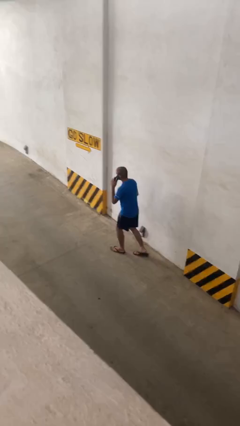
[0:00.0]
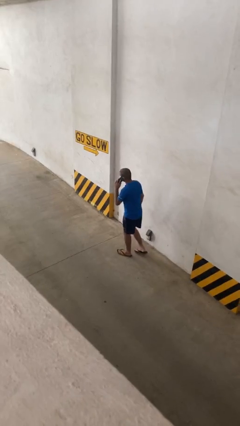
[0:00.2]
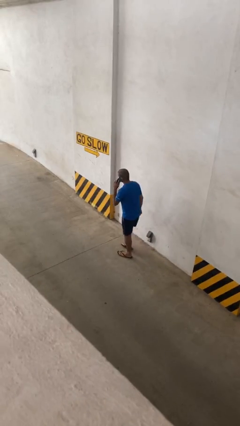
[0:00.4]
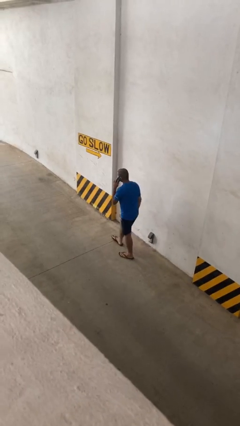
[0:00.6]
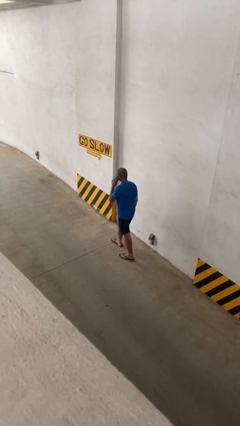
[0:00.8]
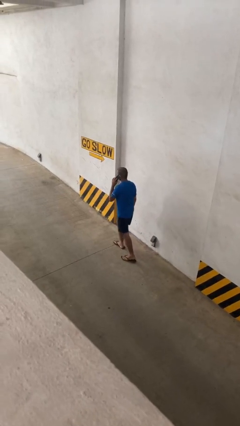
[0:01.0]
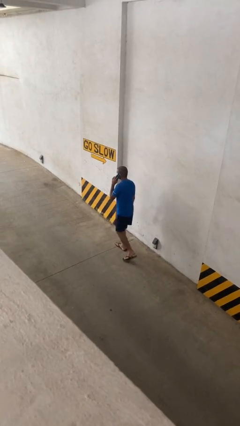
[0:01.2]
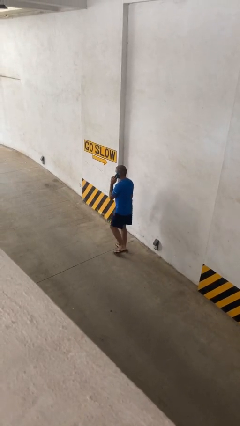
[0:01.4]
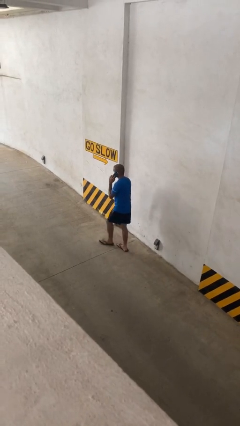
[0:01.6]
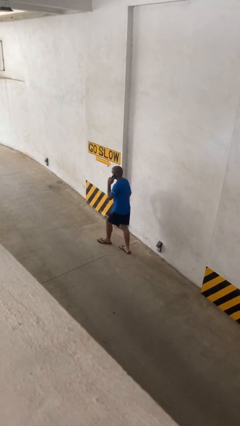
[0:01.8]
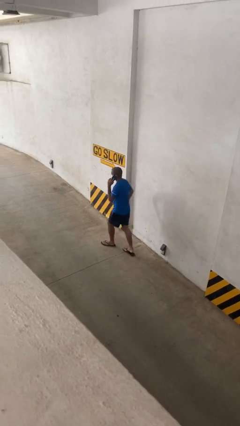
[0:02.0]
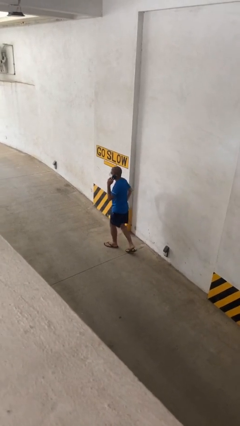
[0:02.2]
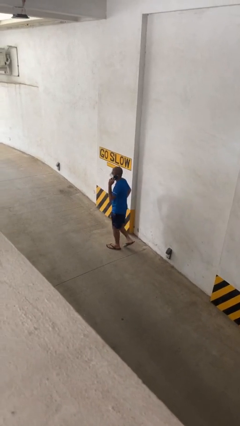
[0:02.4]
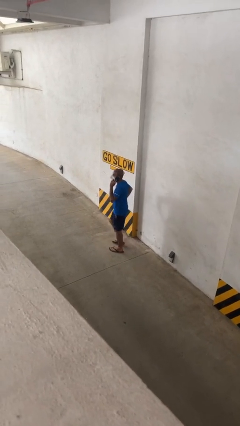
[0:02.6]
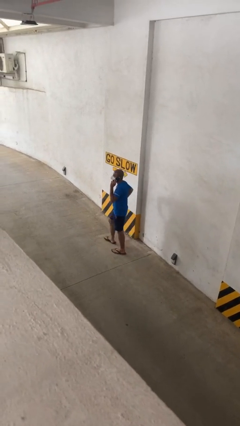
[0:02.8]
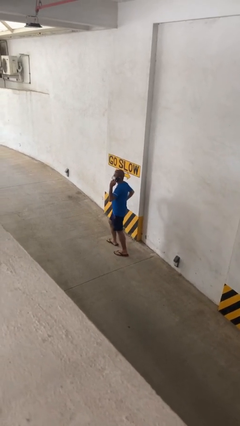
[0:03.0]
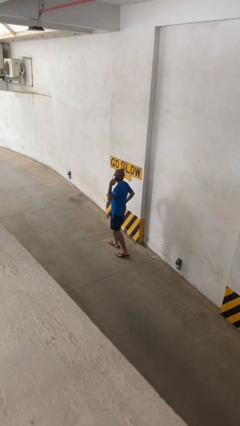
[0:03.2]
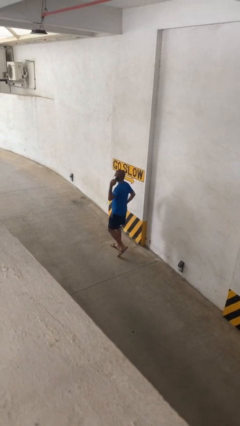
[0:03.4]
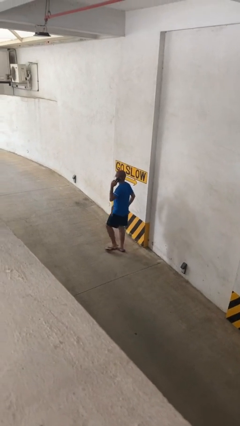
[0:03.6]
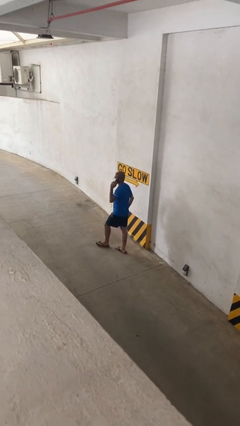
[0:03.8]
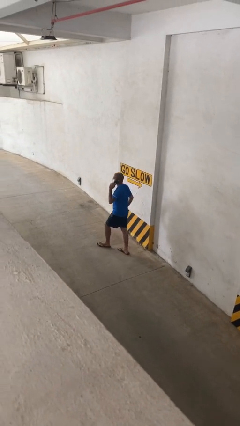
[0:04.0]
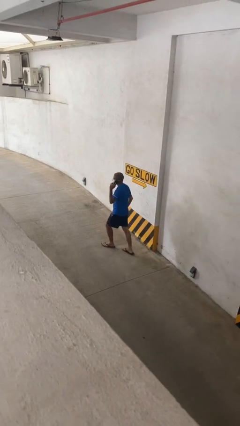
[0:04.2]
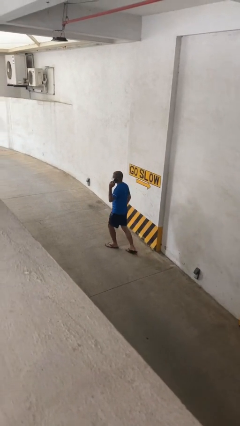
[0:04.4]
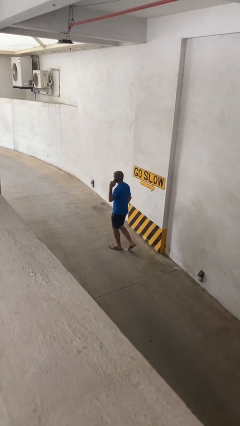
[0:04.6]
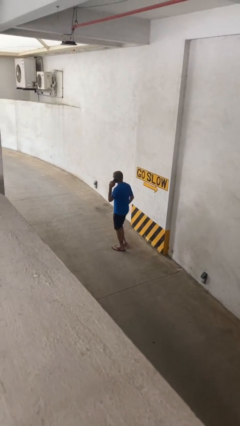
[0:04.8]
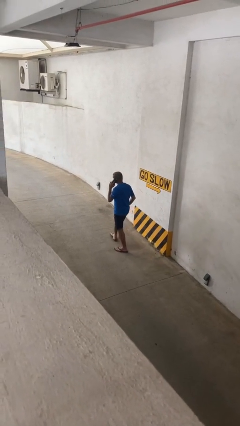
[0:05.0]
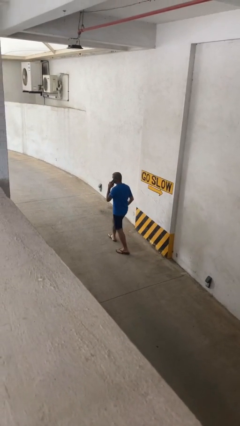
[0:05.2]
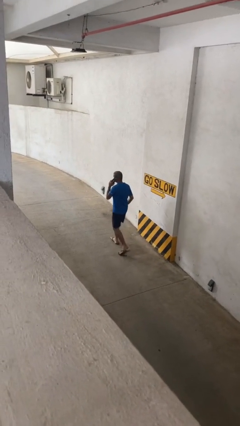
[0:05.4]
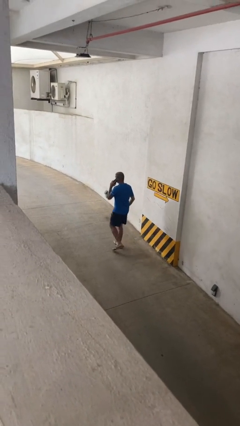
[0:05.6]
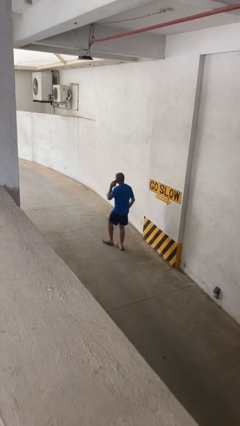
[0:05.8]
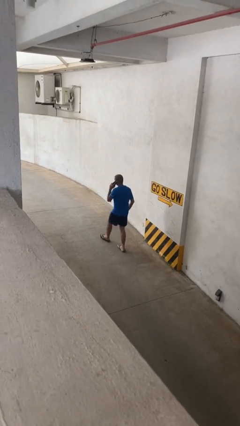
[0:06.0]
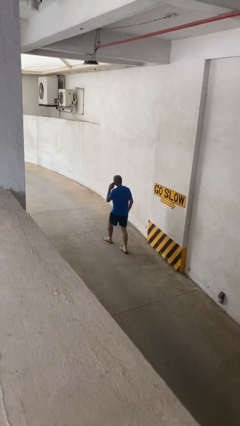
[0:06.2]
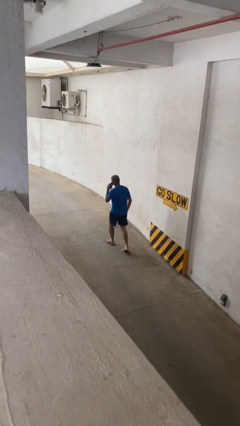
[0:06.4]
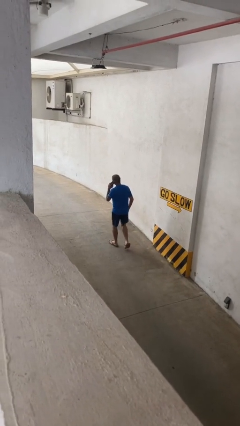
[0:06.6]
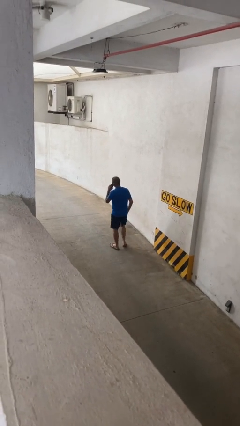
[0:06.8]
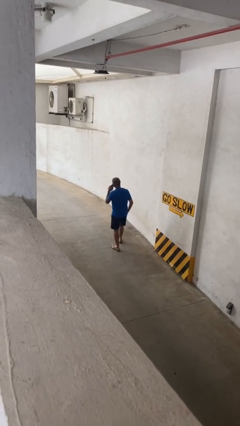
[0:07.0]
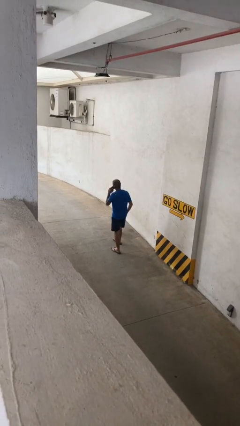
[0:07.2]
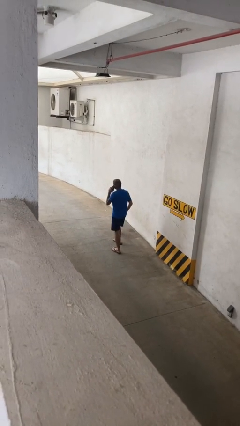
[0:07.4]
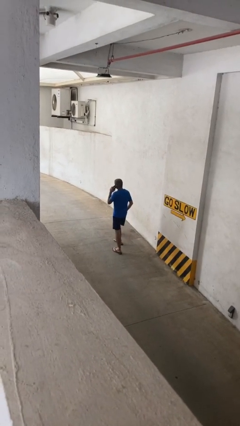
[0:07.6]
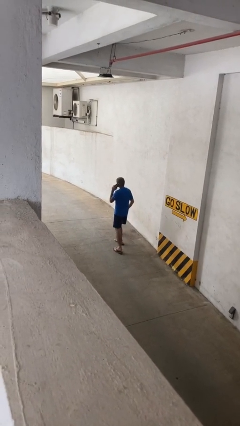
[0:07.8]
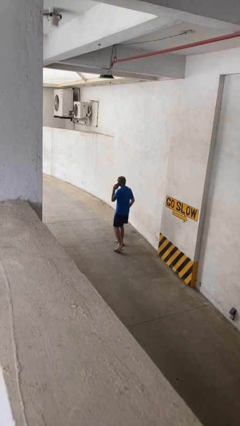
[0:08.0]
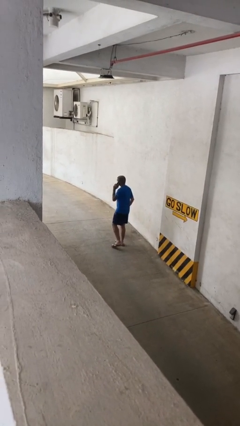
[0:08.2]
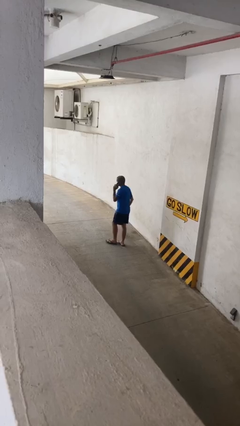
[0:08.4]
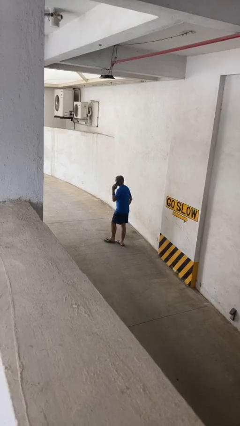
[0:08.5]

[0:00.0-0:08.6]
person talks on phone

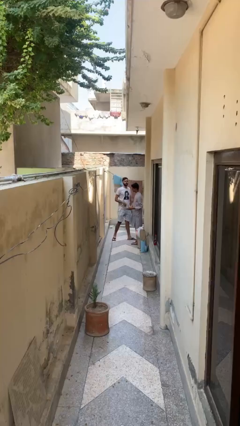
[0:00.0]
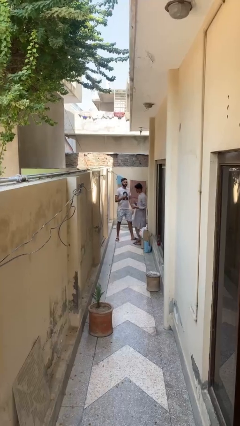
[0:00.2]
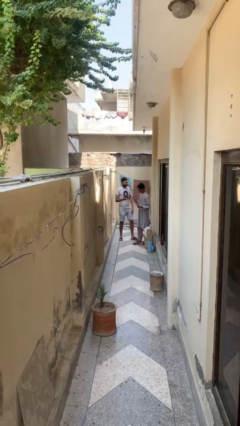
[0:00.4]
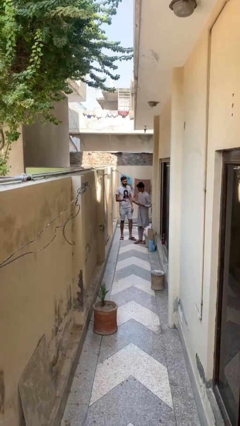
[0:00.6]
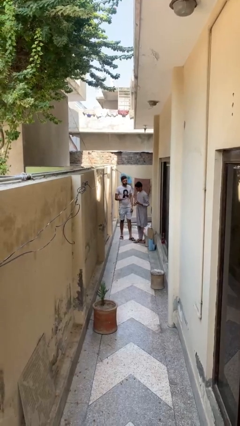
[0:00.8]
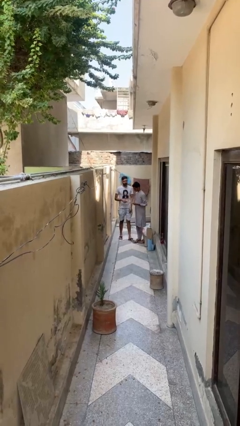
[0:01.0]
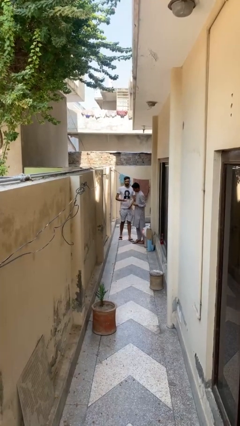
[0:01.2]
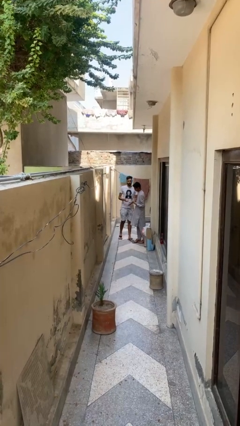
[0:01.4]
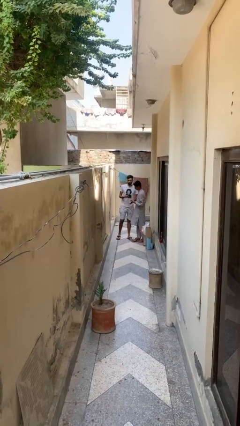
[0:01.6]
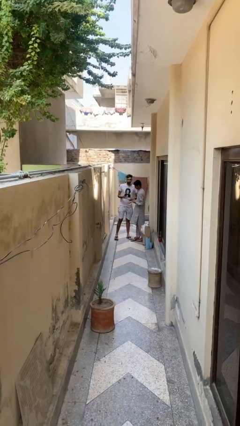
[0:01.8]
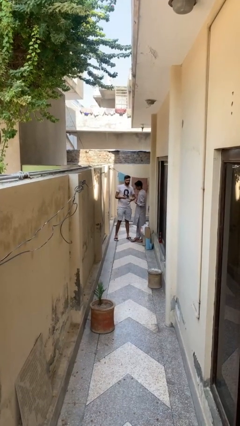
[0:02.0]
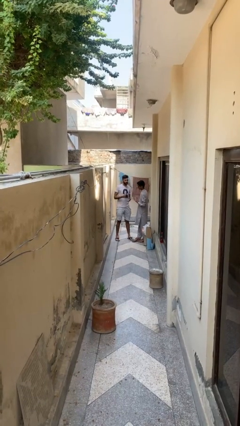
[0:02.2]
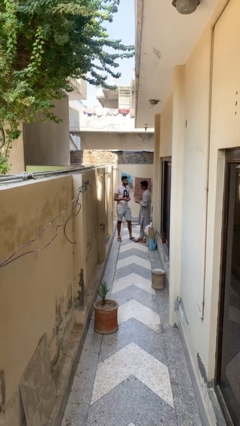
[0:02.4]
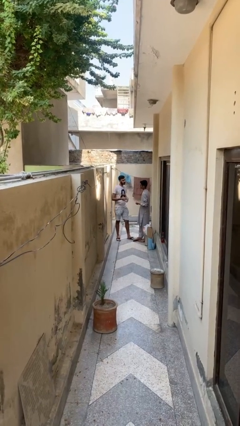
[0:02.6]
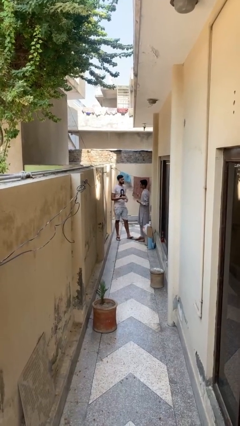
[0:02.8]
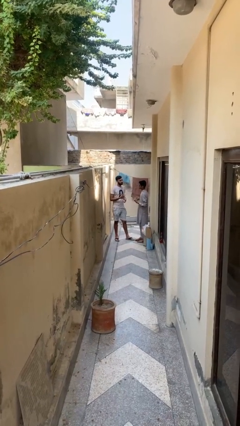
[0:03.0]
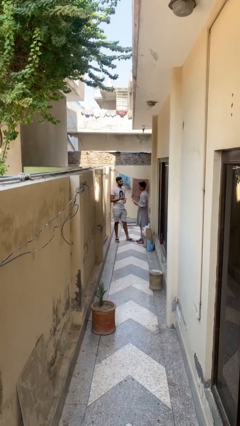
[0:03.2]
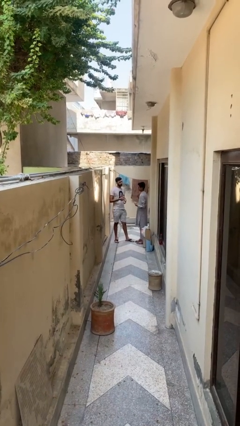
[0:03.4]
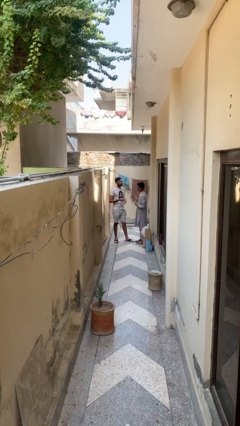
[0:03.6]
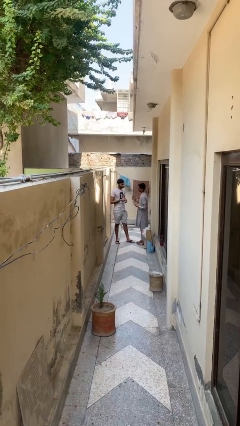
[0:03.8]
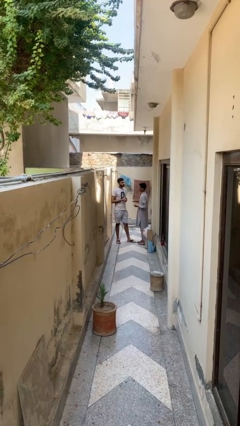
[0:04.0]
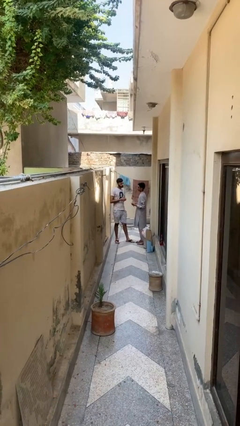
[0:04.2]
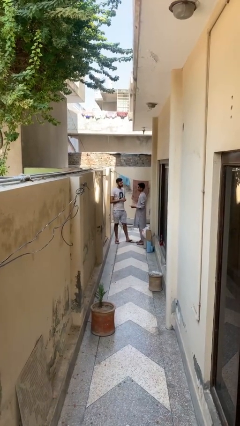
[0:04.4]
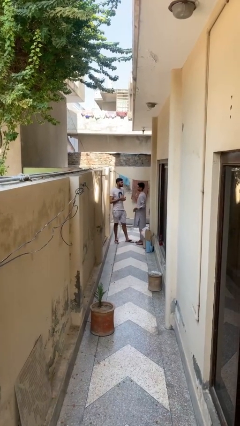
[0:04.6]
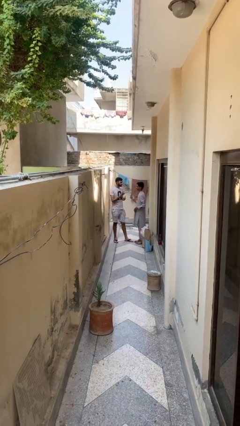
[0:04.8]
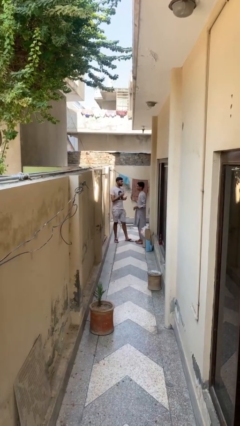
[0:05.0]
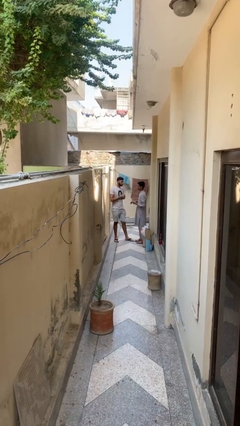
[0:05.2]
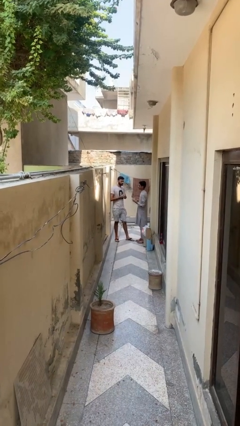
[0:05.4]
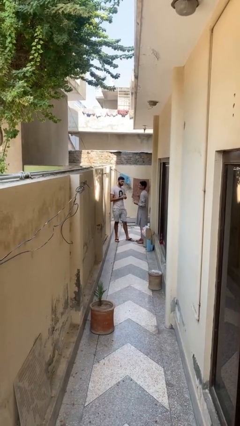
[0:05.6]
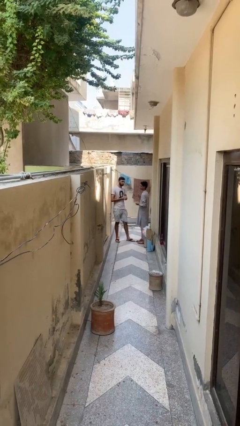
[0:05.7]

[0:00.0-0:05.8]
person talks to person

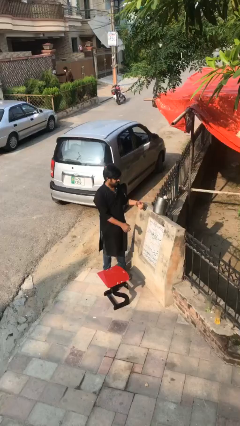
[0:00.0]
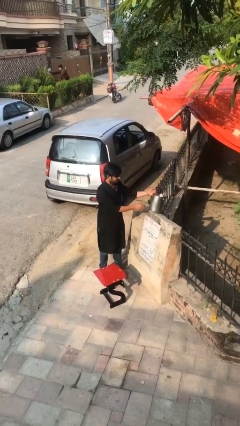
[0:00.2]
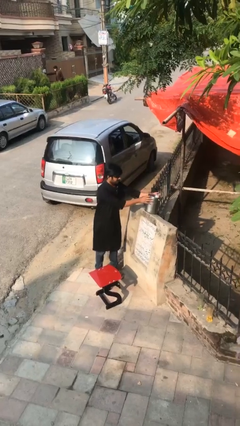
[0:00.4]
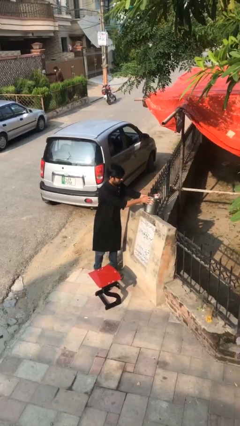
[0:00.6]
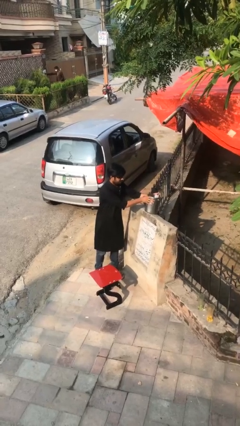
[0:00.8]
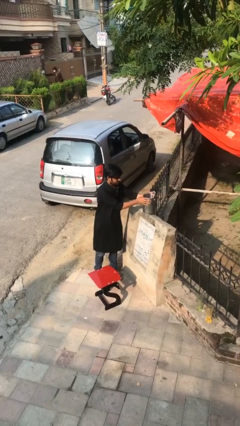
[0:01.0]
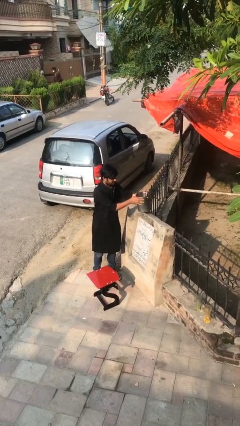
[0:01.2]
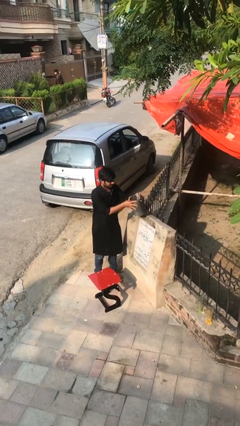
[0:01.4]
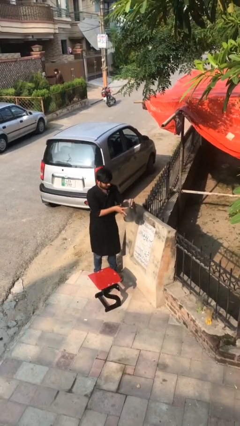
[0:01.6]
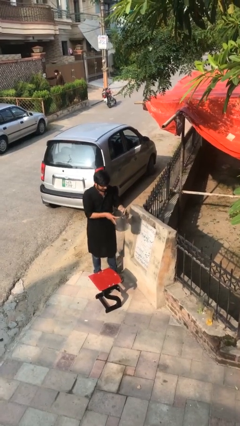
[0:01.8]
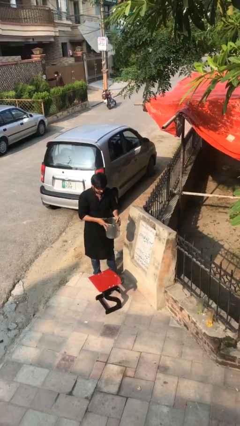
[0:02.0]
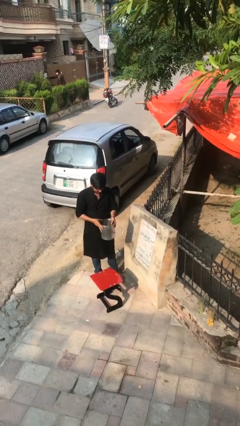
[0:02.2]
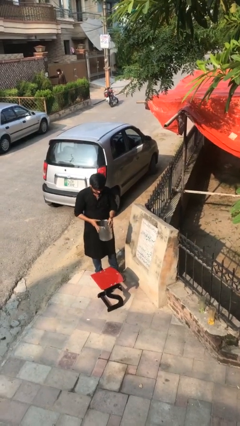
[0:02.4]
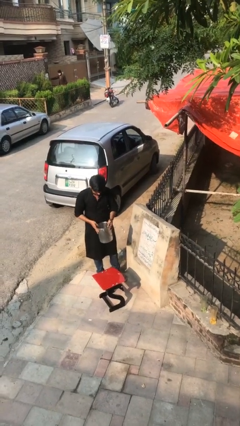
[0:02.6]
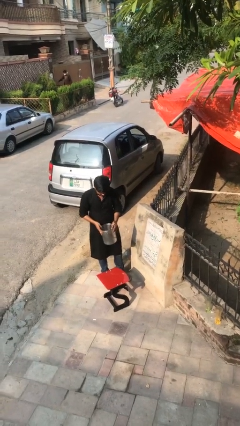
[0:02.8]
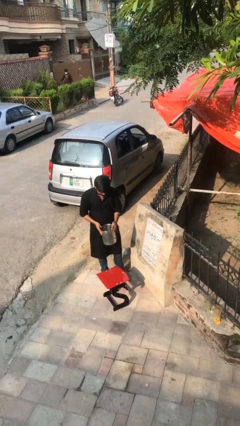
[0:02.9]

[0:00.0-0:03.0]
person picks up object from shelf

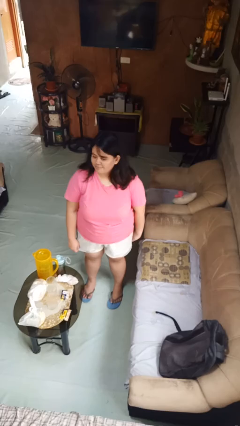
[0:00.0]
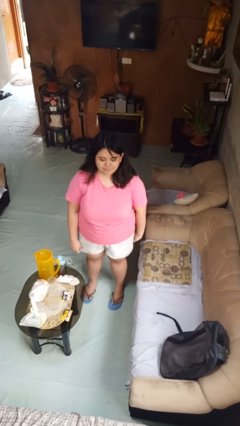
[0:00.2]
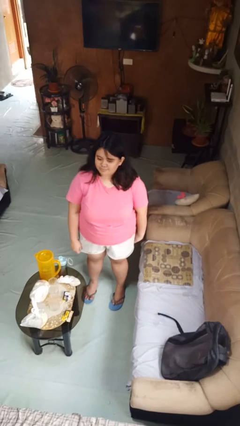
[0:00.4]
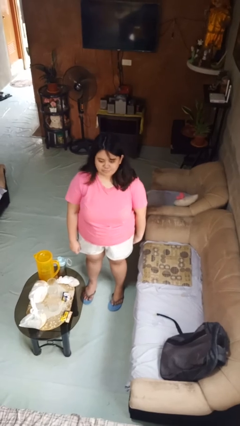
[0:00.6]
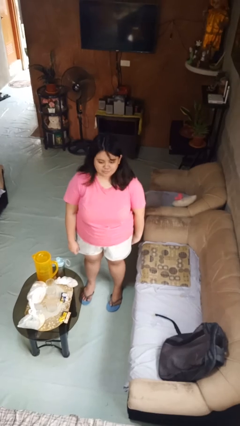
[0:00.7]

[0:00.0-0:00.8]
person shakes head
